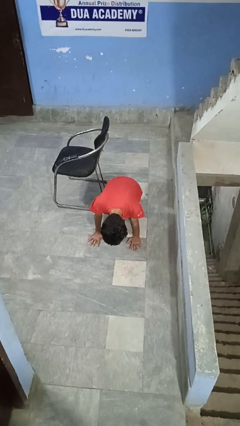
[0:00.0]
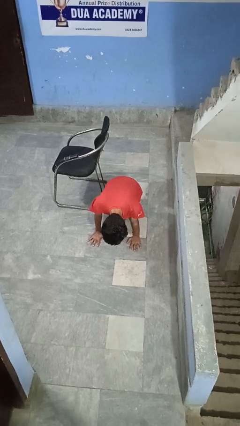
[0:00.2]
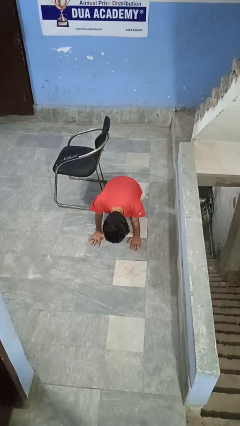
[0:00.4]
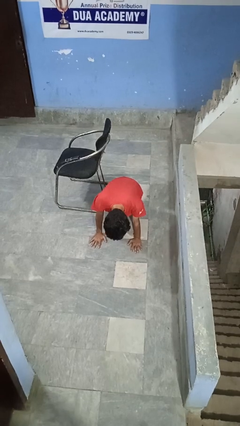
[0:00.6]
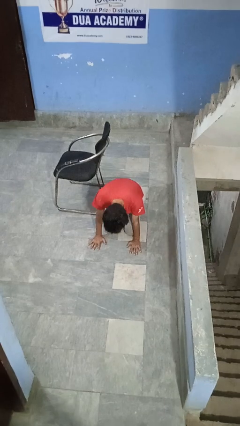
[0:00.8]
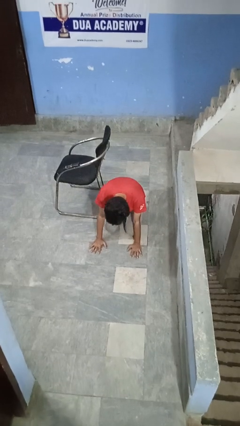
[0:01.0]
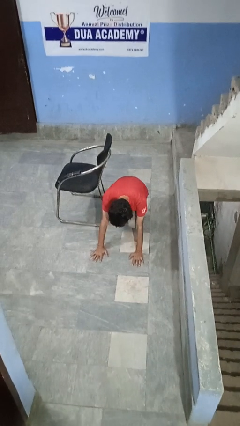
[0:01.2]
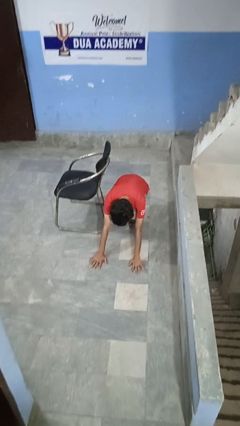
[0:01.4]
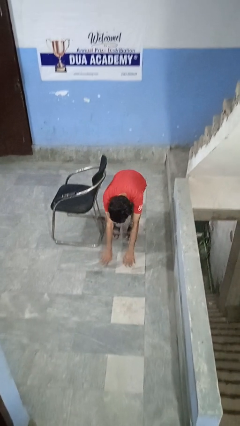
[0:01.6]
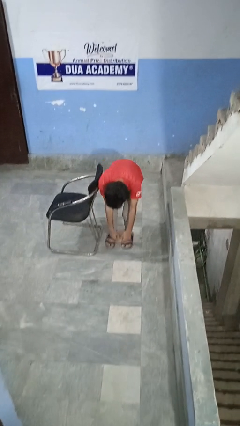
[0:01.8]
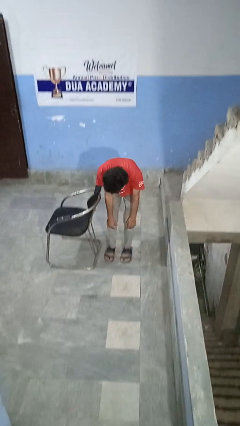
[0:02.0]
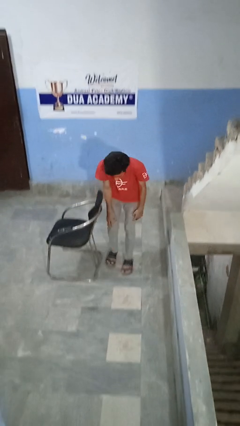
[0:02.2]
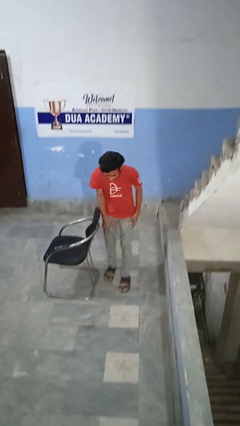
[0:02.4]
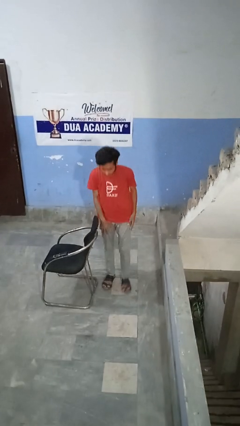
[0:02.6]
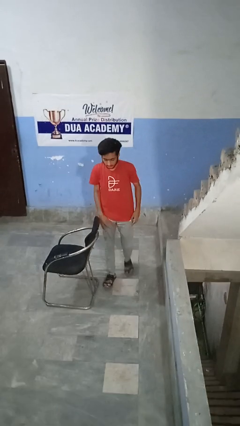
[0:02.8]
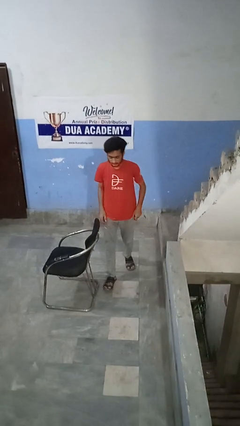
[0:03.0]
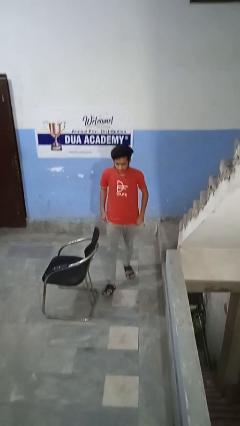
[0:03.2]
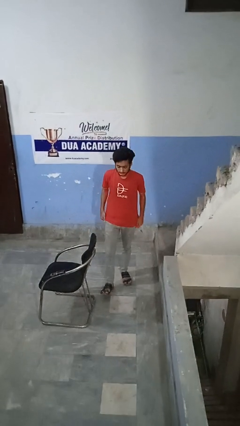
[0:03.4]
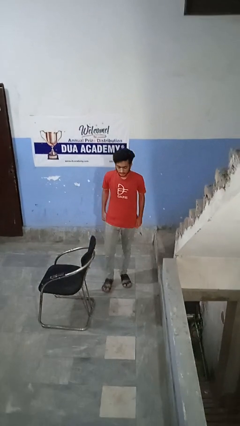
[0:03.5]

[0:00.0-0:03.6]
person stands up from floor

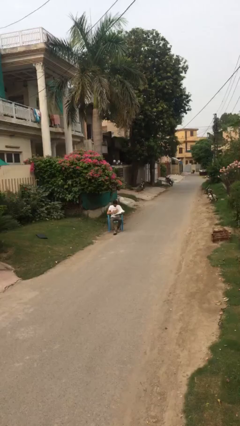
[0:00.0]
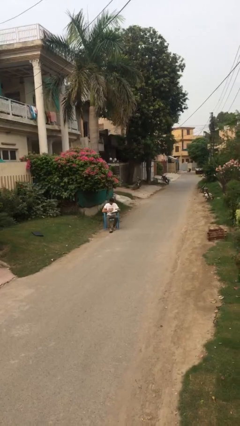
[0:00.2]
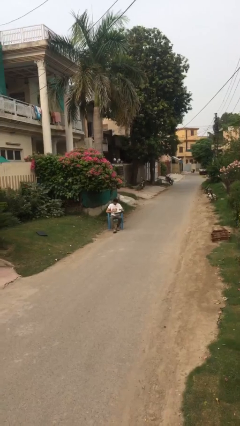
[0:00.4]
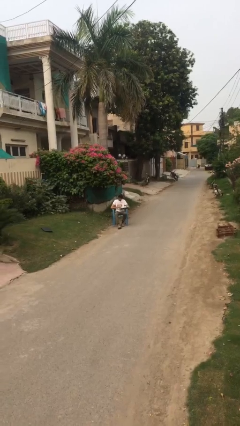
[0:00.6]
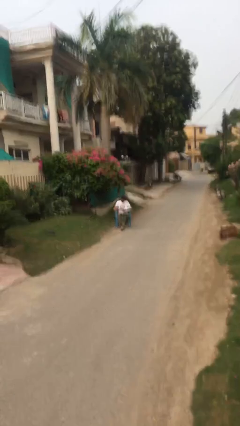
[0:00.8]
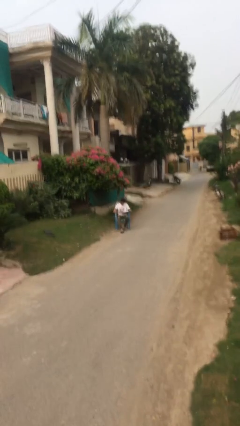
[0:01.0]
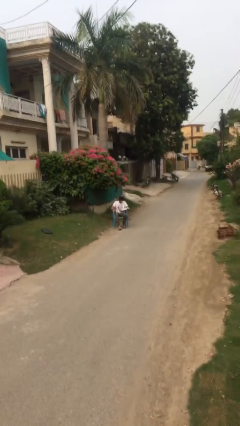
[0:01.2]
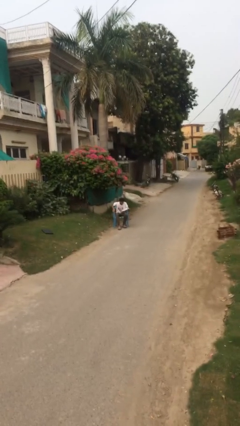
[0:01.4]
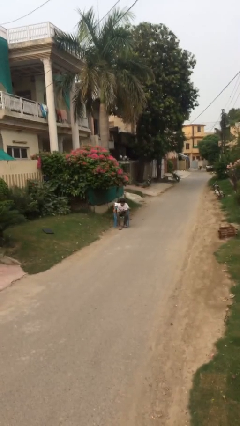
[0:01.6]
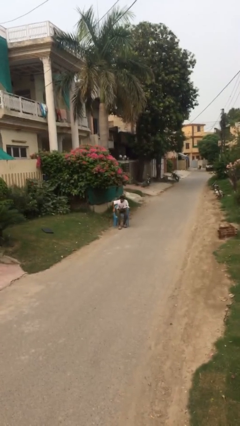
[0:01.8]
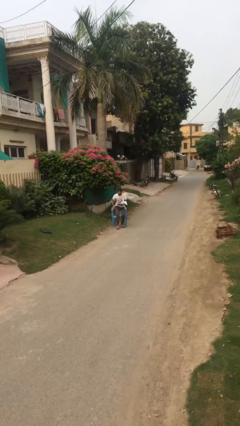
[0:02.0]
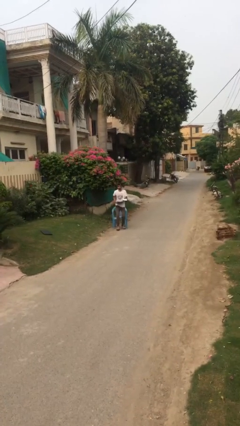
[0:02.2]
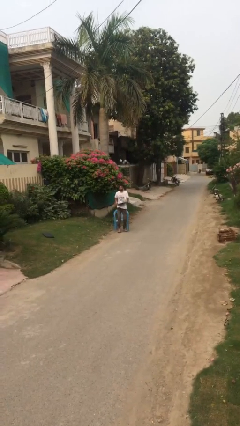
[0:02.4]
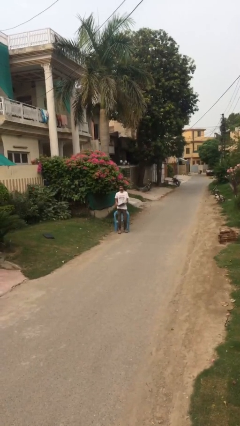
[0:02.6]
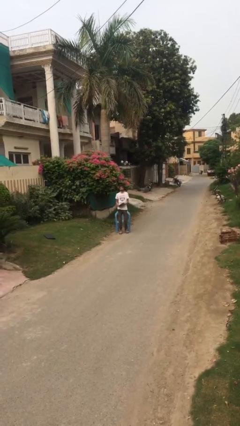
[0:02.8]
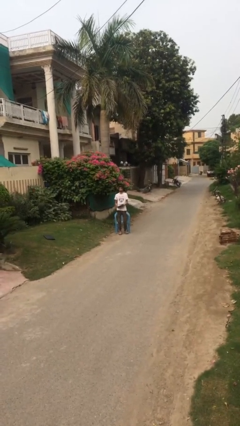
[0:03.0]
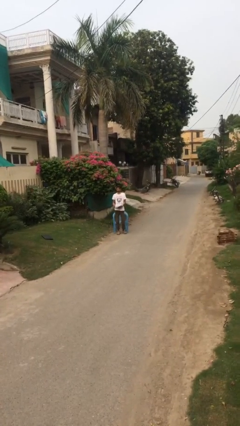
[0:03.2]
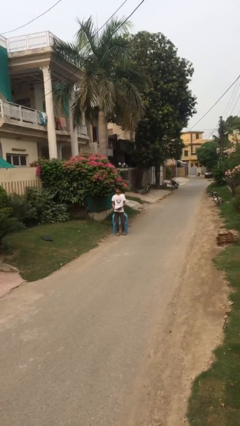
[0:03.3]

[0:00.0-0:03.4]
person stands up

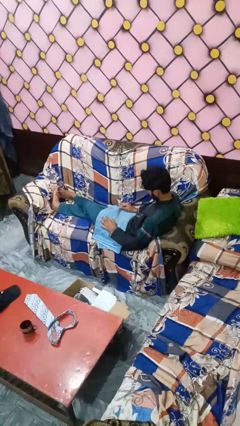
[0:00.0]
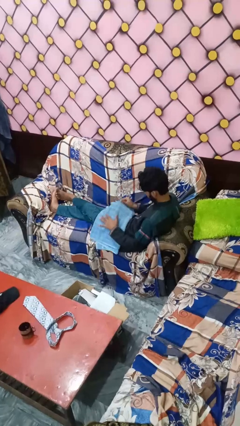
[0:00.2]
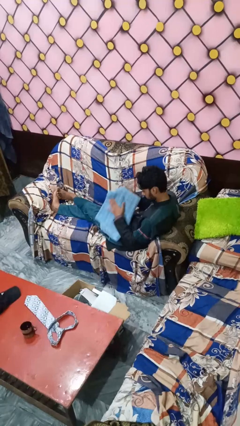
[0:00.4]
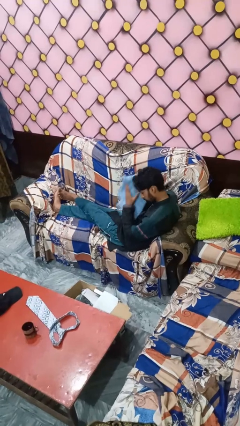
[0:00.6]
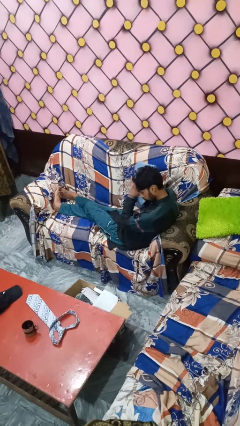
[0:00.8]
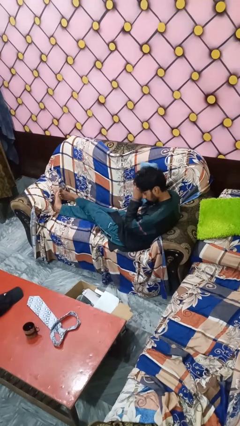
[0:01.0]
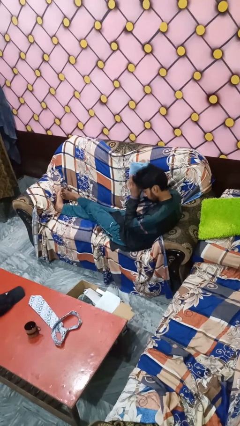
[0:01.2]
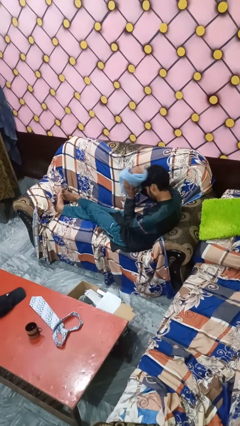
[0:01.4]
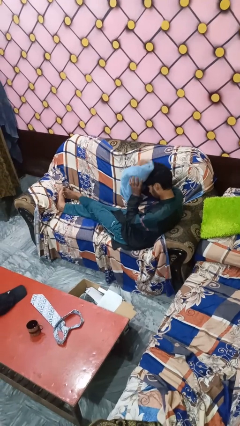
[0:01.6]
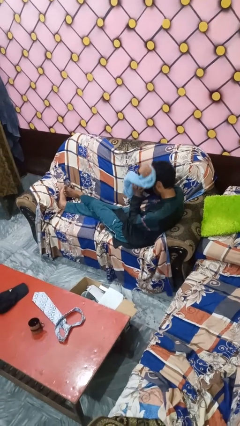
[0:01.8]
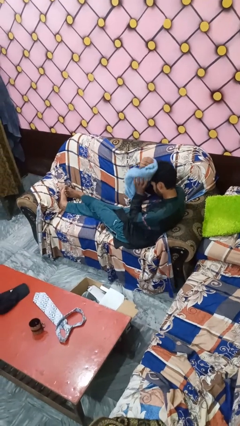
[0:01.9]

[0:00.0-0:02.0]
person dries hair with towel

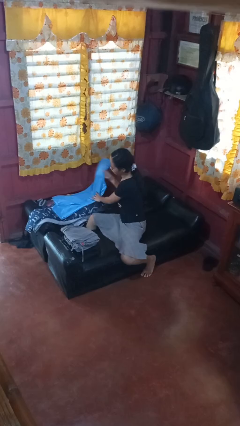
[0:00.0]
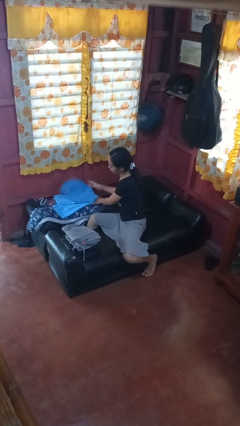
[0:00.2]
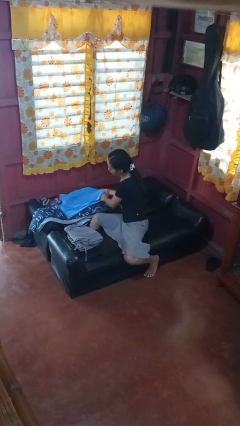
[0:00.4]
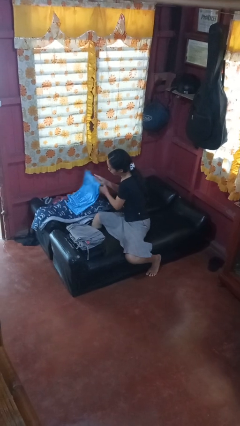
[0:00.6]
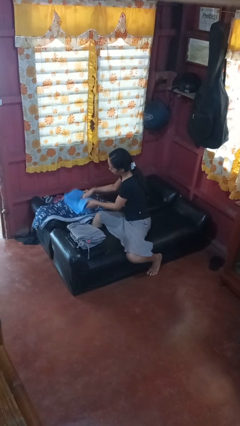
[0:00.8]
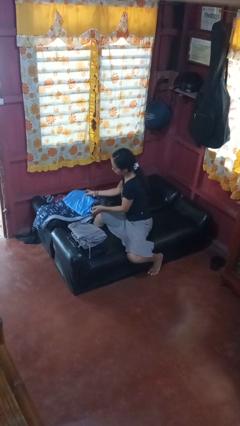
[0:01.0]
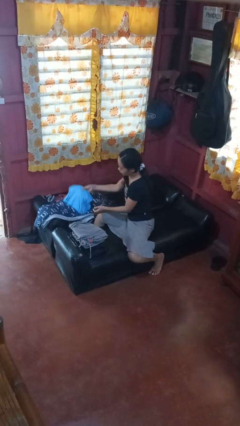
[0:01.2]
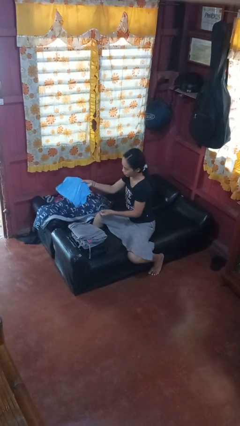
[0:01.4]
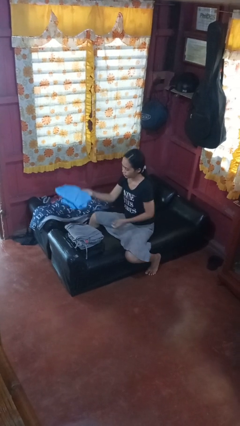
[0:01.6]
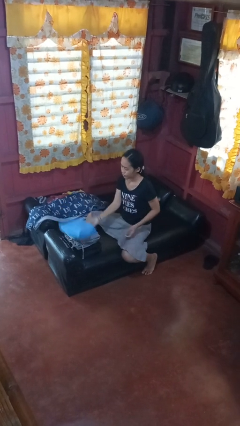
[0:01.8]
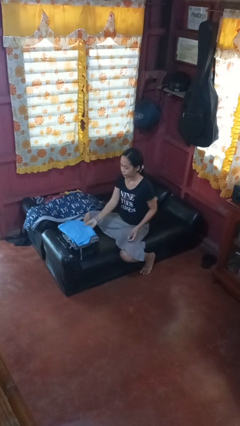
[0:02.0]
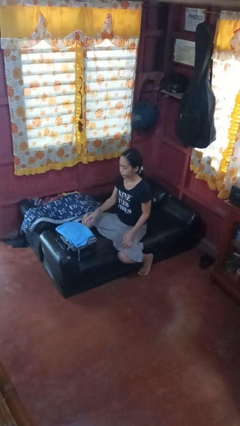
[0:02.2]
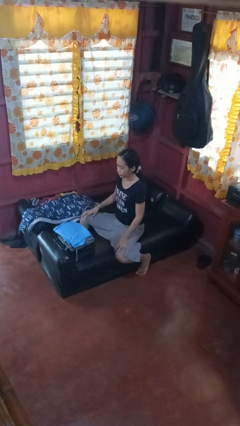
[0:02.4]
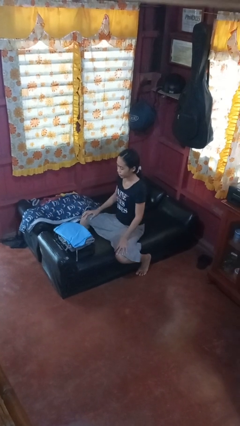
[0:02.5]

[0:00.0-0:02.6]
person folds pants

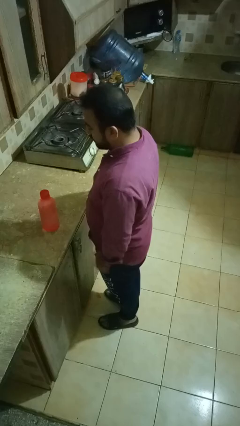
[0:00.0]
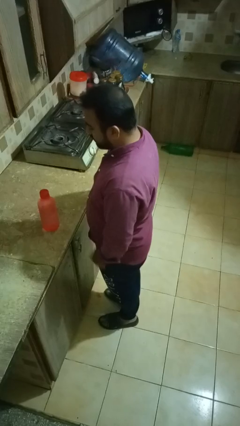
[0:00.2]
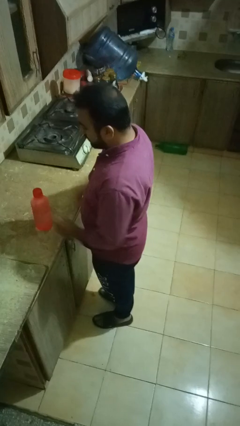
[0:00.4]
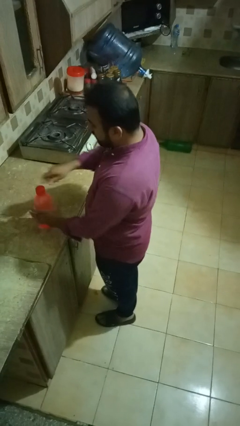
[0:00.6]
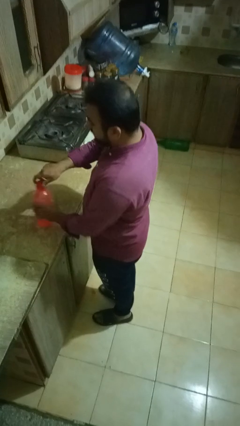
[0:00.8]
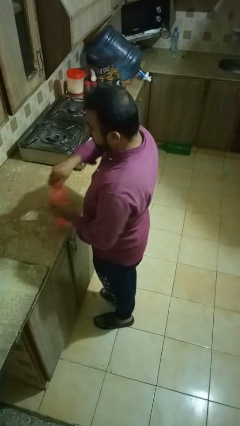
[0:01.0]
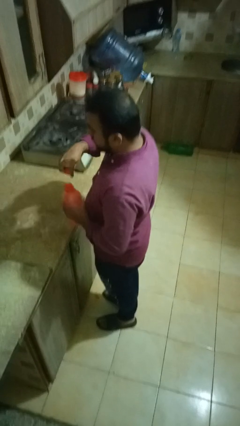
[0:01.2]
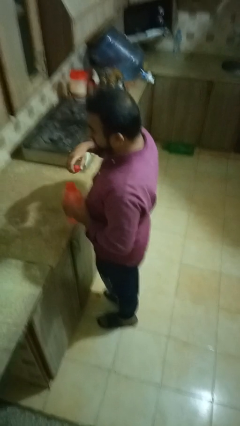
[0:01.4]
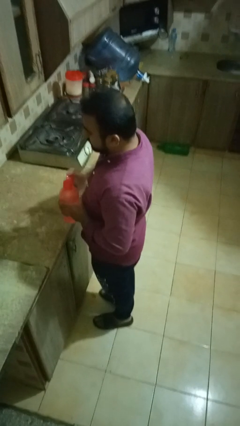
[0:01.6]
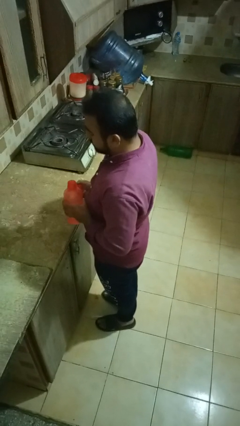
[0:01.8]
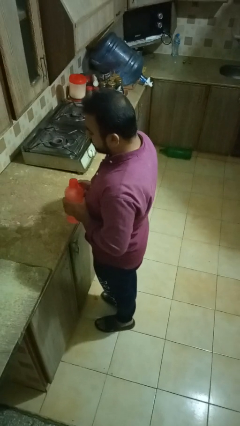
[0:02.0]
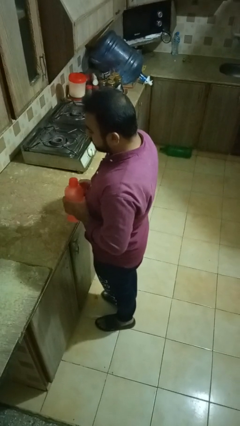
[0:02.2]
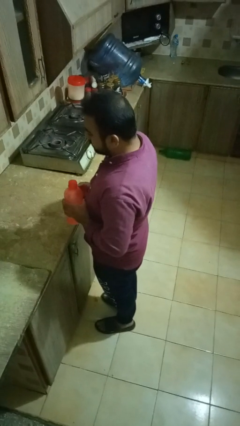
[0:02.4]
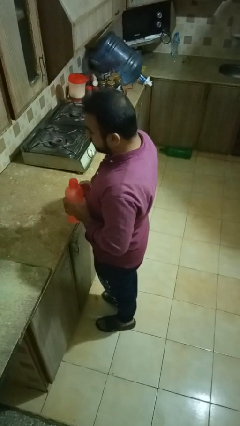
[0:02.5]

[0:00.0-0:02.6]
person unscrews lid from bottle

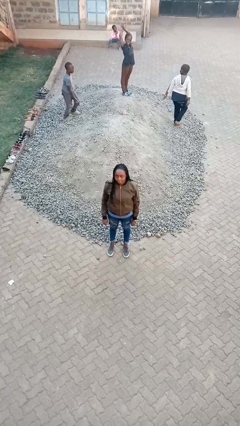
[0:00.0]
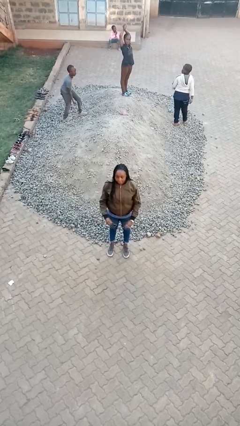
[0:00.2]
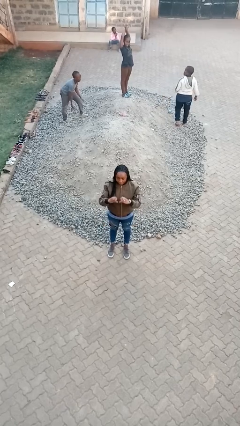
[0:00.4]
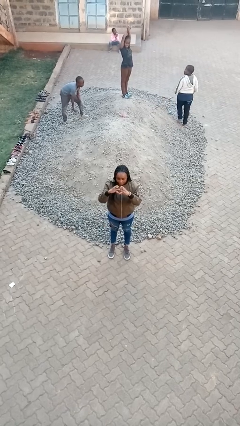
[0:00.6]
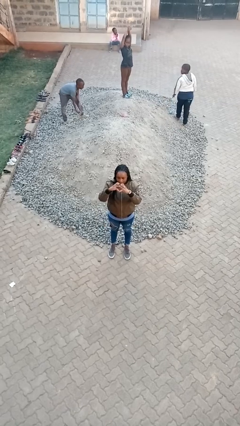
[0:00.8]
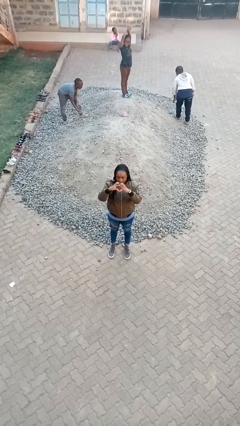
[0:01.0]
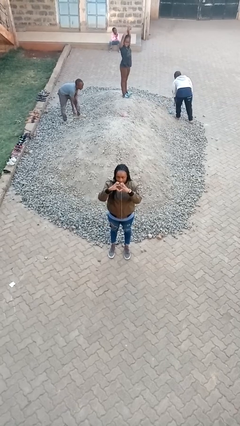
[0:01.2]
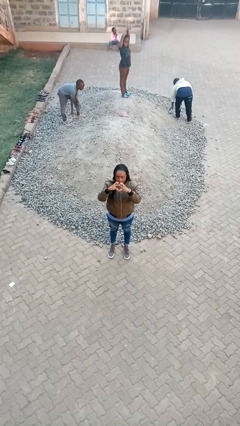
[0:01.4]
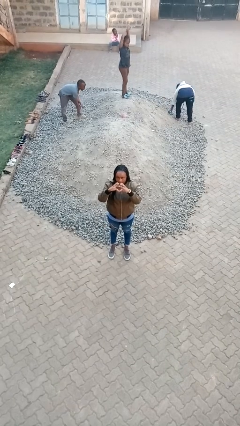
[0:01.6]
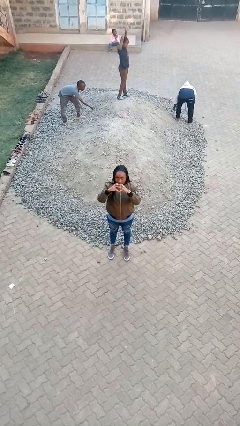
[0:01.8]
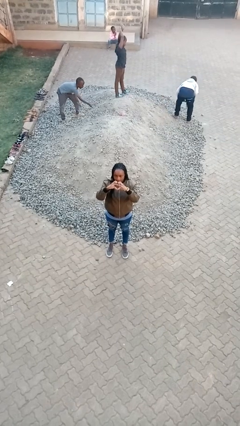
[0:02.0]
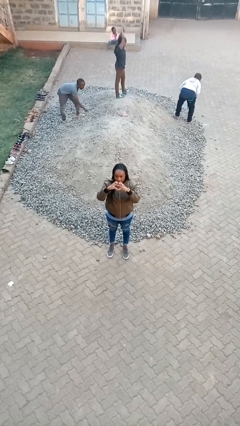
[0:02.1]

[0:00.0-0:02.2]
person gestures heart

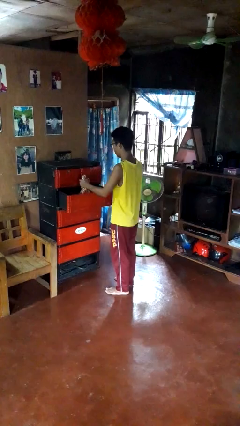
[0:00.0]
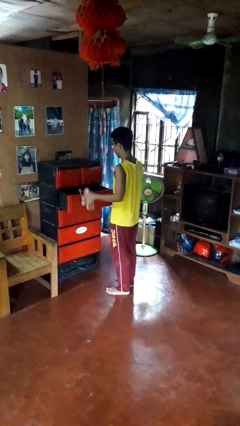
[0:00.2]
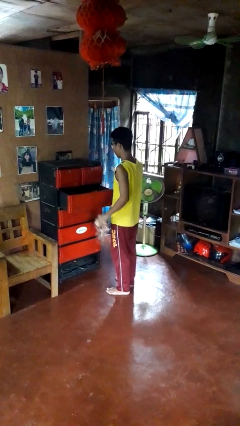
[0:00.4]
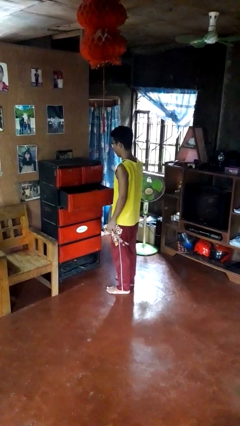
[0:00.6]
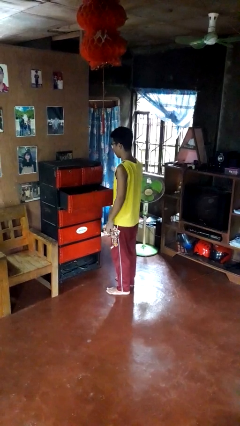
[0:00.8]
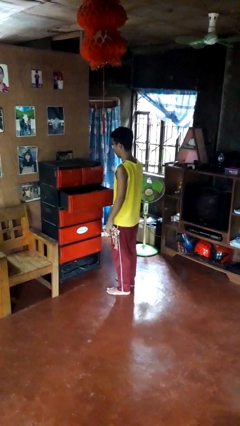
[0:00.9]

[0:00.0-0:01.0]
person takes clothes from dresser
